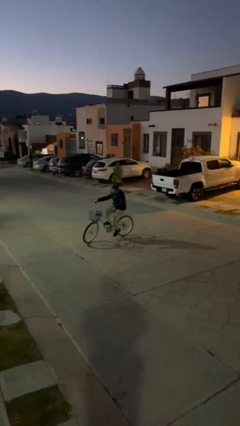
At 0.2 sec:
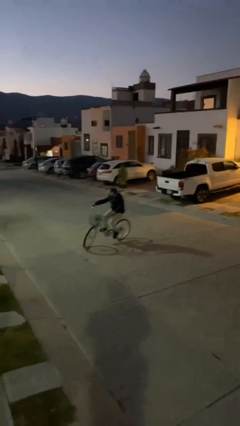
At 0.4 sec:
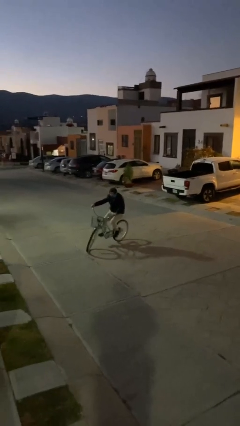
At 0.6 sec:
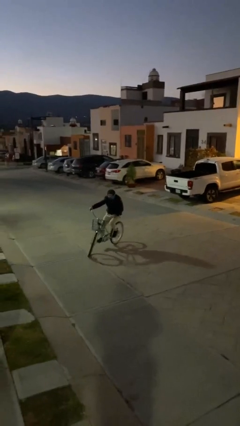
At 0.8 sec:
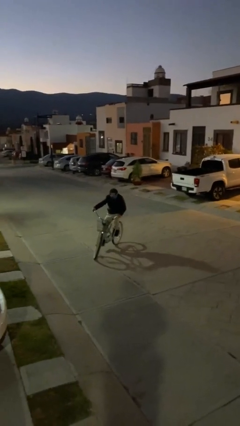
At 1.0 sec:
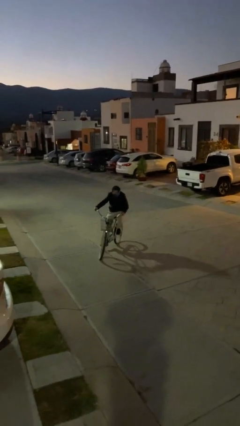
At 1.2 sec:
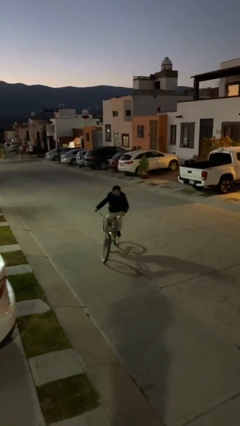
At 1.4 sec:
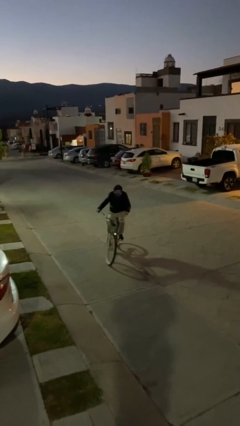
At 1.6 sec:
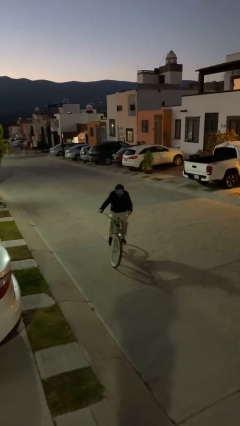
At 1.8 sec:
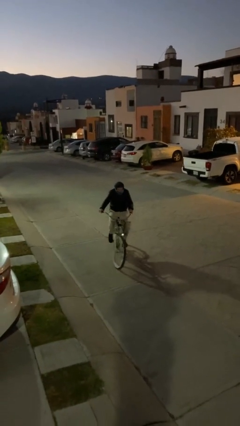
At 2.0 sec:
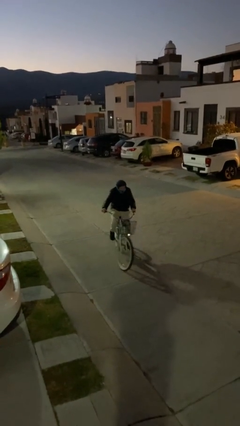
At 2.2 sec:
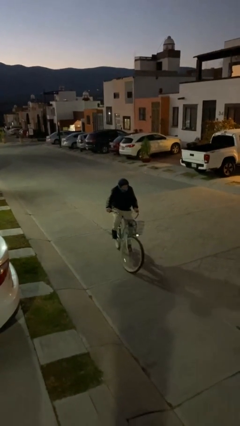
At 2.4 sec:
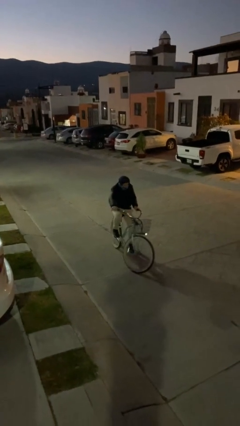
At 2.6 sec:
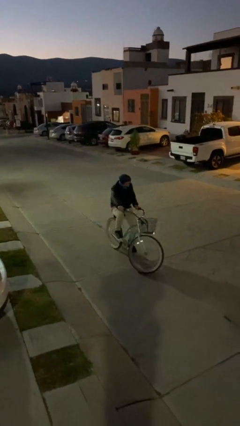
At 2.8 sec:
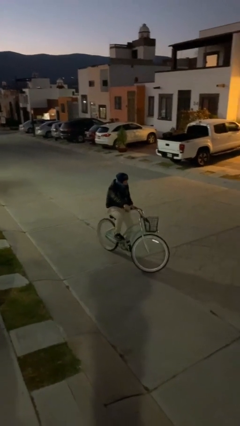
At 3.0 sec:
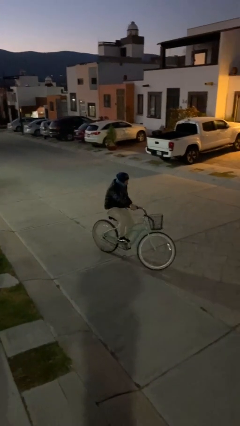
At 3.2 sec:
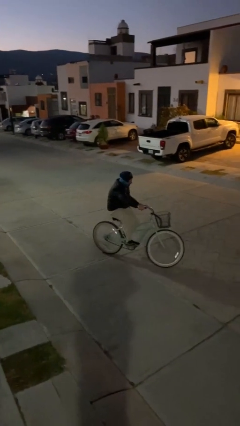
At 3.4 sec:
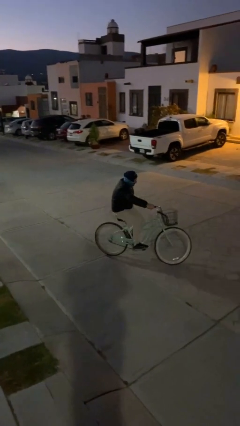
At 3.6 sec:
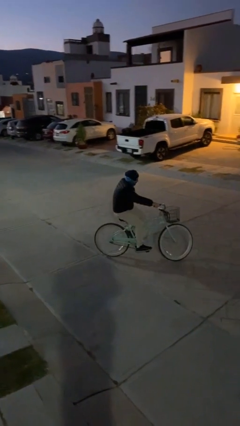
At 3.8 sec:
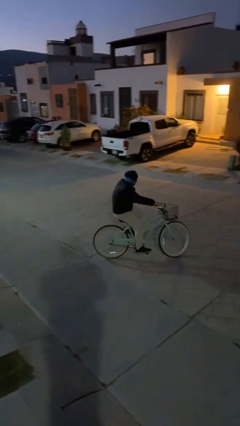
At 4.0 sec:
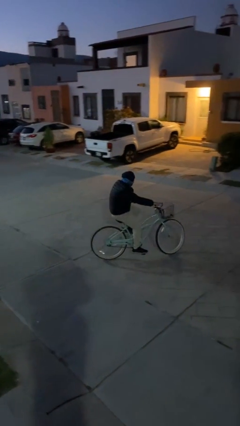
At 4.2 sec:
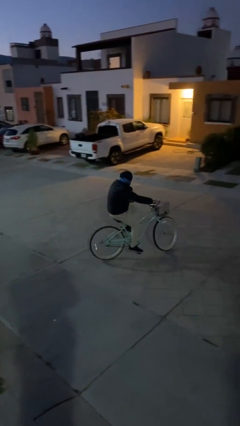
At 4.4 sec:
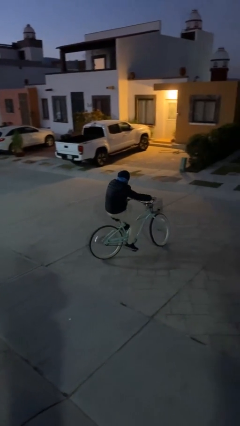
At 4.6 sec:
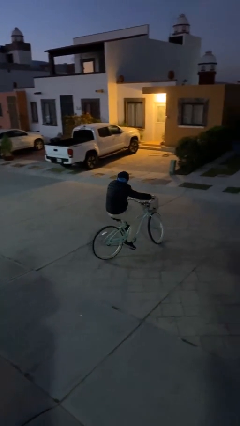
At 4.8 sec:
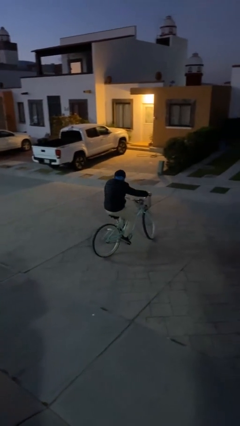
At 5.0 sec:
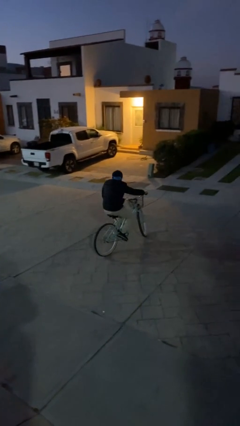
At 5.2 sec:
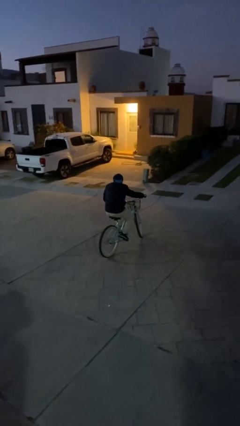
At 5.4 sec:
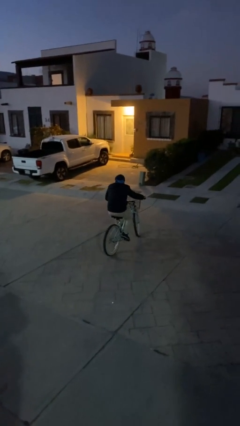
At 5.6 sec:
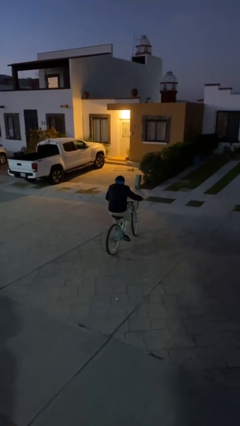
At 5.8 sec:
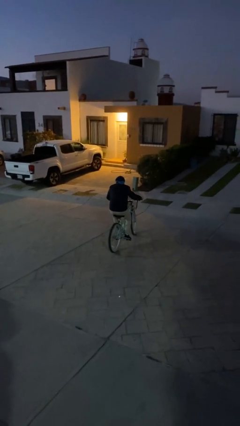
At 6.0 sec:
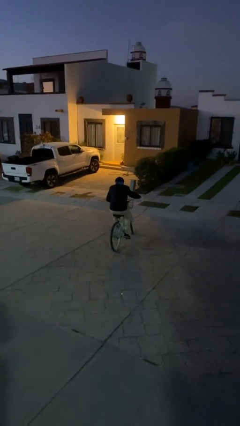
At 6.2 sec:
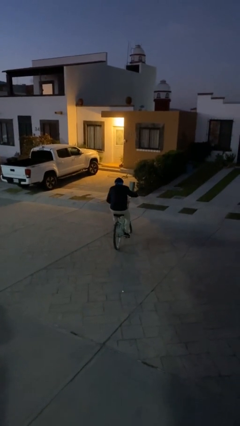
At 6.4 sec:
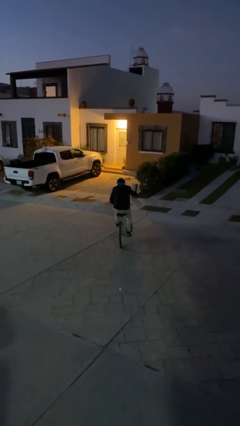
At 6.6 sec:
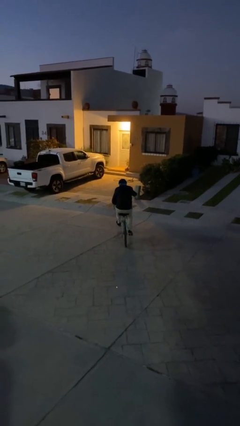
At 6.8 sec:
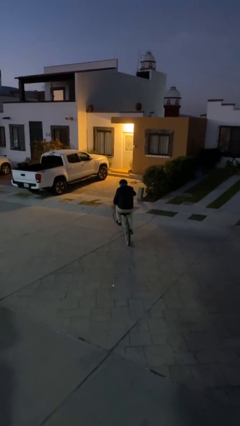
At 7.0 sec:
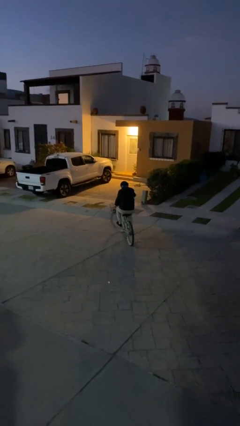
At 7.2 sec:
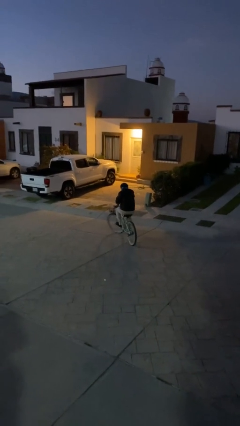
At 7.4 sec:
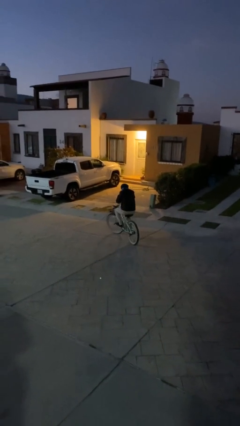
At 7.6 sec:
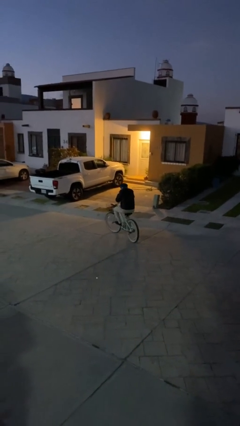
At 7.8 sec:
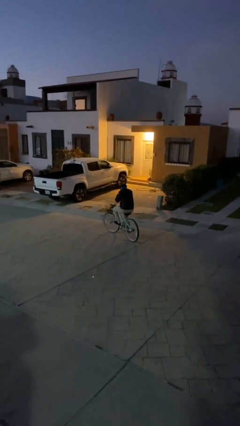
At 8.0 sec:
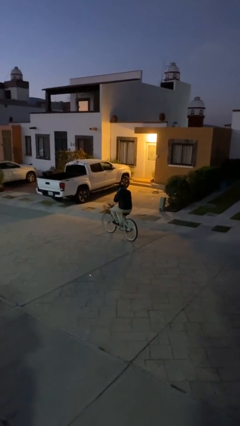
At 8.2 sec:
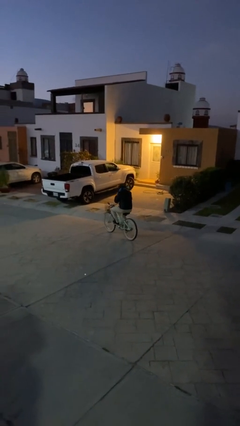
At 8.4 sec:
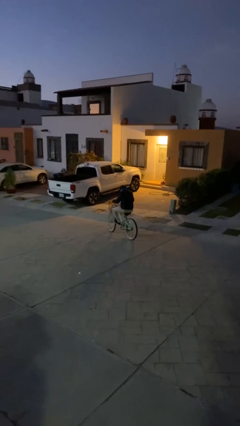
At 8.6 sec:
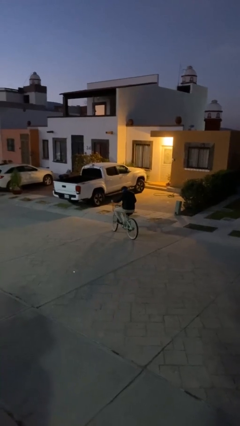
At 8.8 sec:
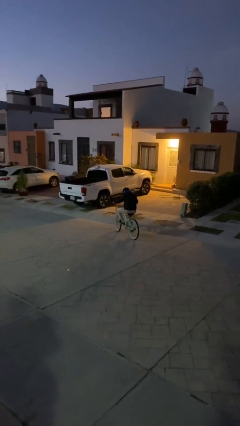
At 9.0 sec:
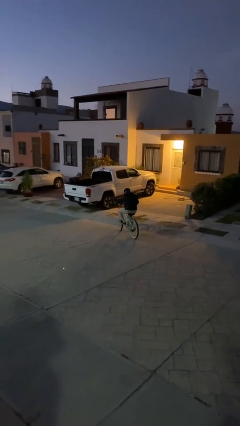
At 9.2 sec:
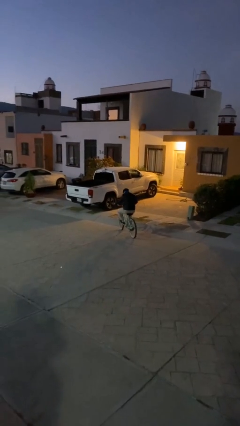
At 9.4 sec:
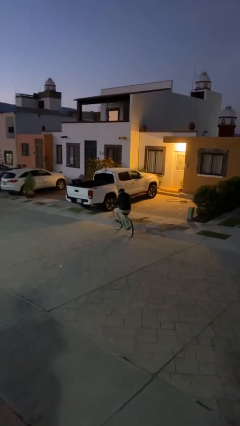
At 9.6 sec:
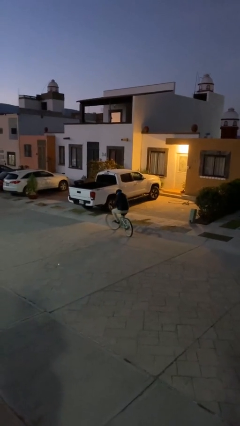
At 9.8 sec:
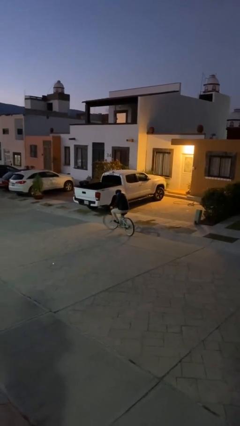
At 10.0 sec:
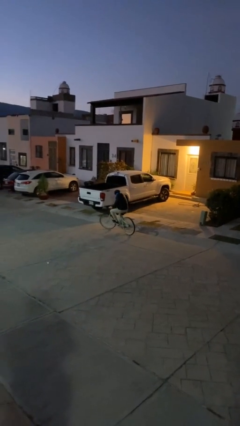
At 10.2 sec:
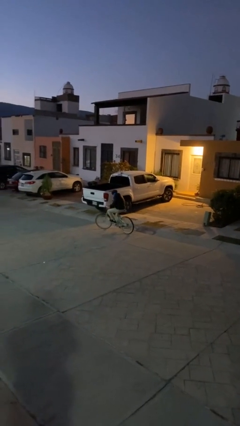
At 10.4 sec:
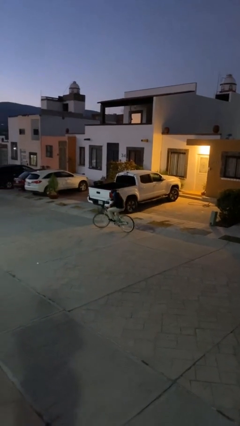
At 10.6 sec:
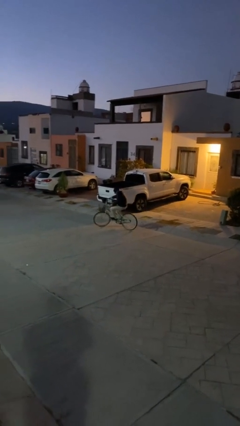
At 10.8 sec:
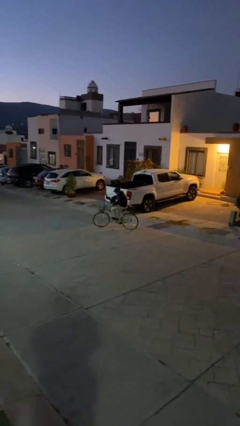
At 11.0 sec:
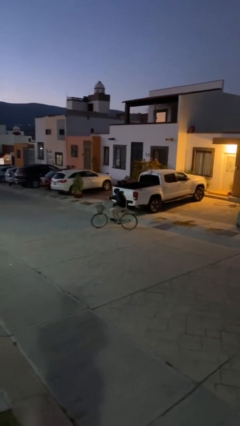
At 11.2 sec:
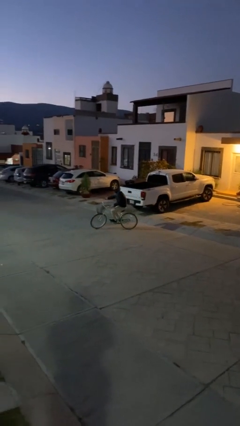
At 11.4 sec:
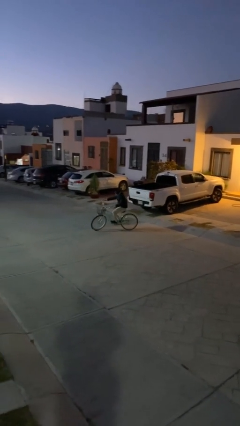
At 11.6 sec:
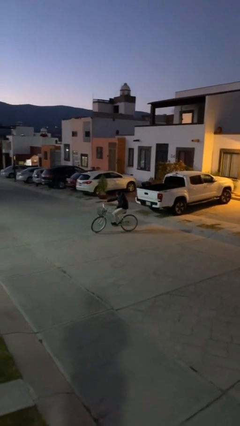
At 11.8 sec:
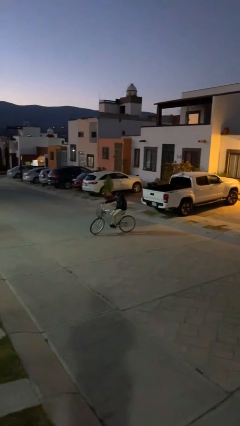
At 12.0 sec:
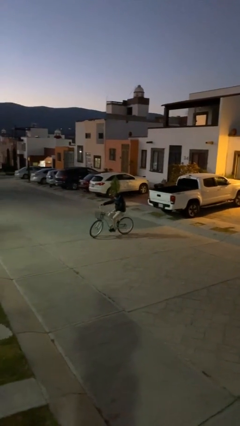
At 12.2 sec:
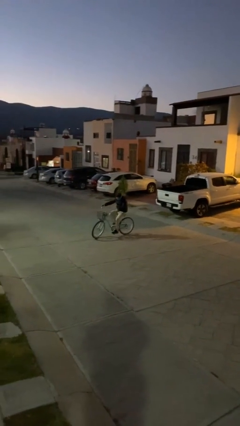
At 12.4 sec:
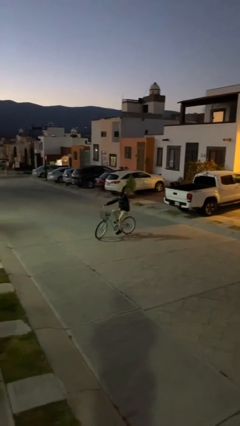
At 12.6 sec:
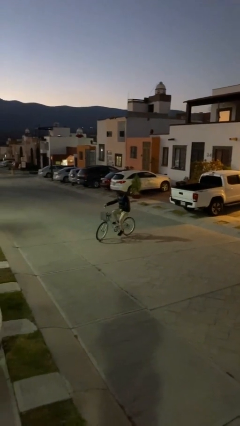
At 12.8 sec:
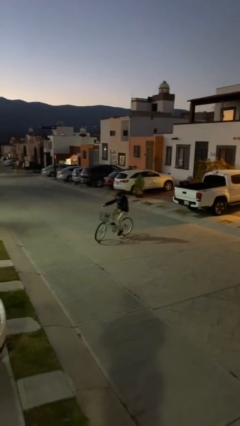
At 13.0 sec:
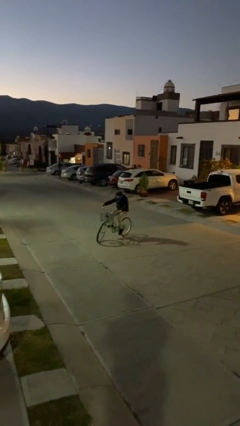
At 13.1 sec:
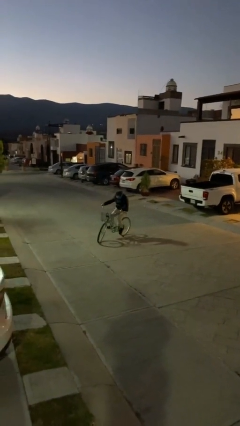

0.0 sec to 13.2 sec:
person rides bicycle

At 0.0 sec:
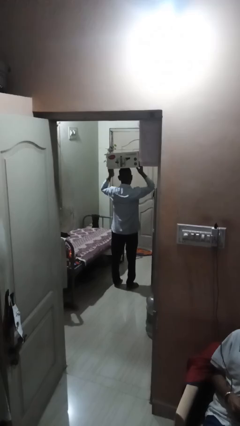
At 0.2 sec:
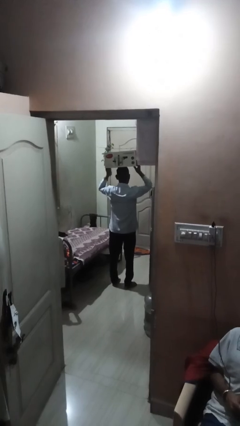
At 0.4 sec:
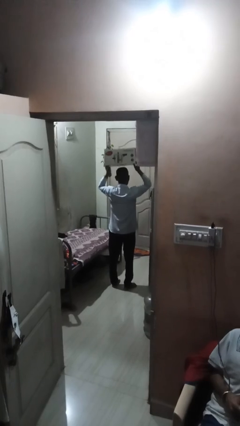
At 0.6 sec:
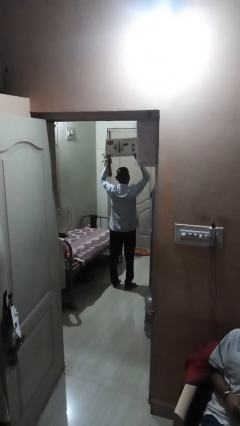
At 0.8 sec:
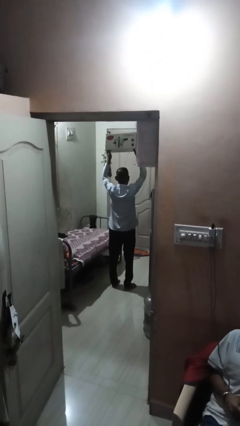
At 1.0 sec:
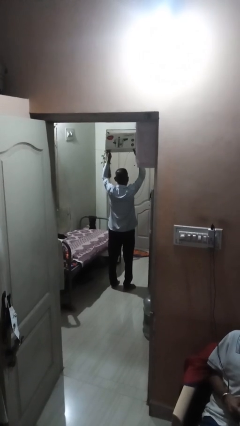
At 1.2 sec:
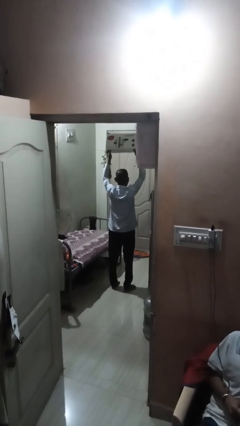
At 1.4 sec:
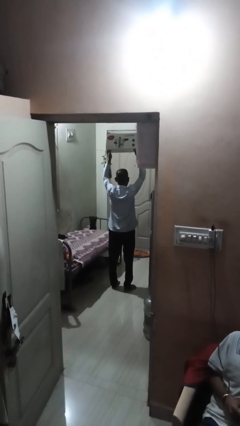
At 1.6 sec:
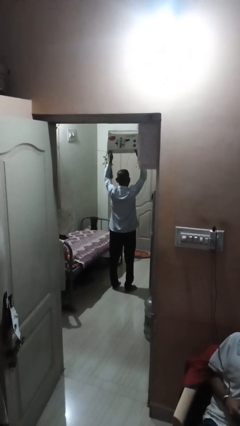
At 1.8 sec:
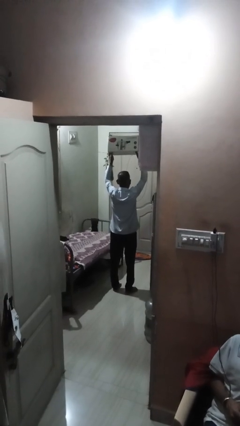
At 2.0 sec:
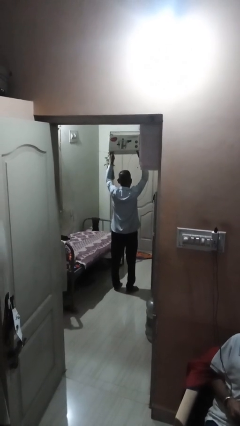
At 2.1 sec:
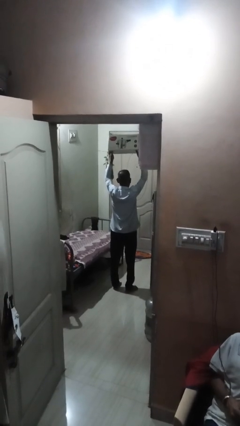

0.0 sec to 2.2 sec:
person holds object above head

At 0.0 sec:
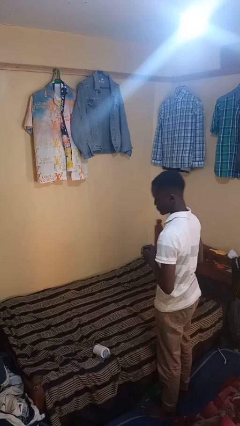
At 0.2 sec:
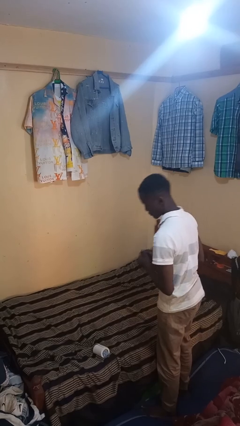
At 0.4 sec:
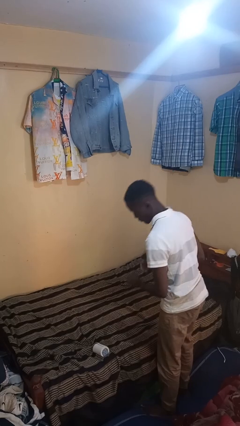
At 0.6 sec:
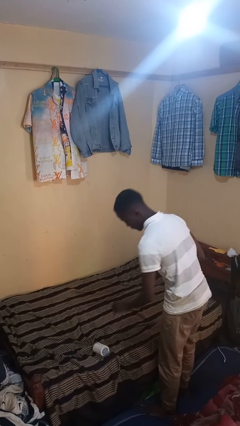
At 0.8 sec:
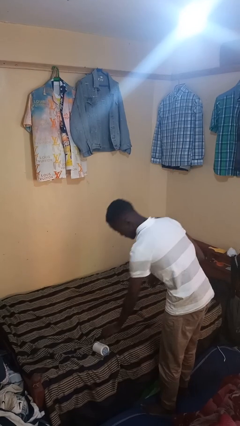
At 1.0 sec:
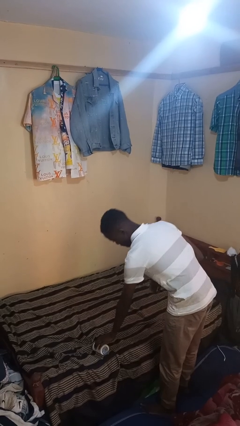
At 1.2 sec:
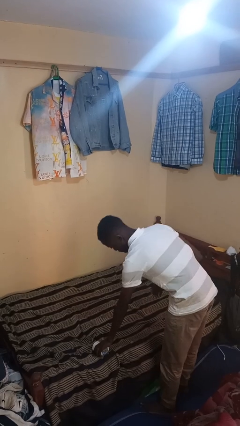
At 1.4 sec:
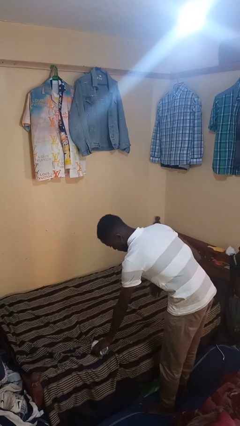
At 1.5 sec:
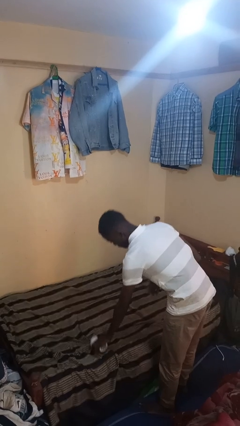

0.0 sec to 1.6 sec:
person picks up object from bed

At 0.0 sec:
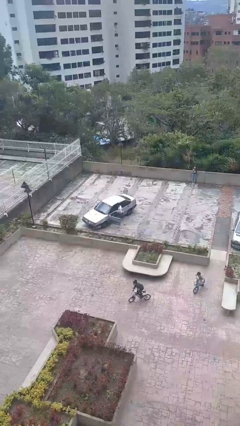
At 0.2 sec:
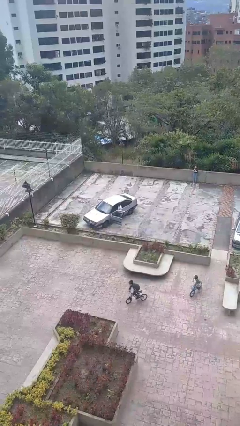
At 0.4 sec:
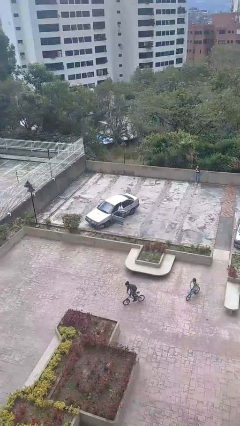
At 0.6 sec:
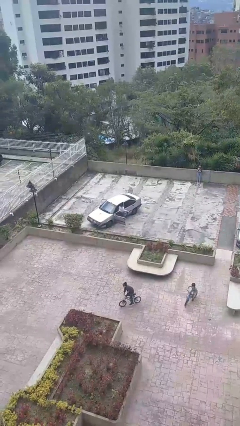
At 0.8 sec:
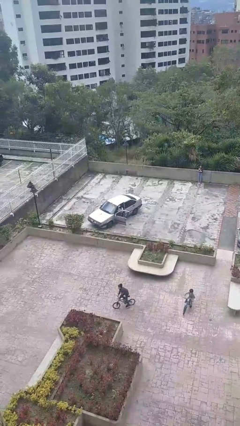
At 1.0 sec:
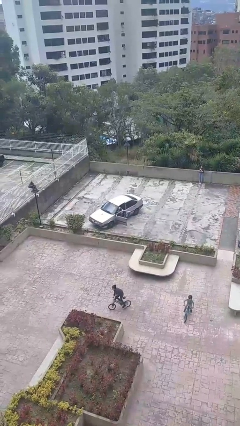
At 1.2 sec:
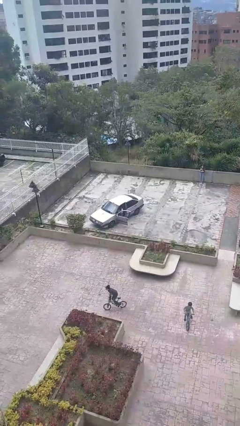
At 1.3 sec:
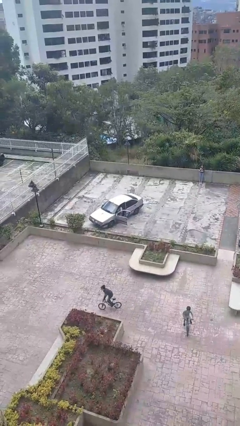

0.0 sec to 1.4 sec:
person enters car
